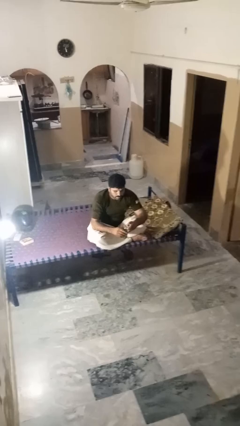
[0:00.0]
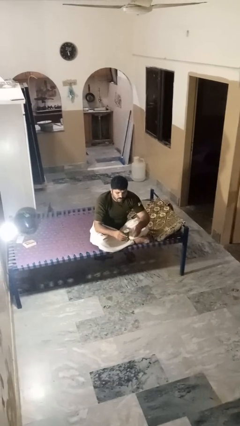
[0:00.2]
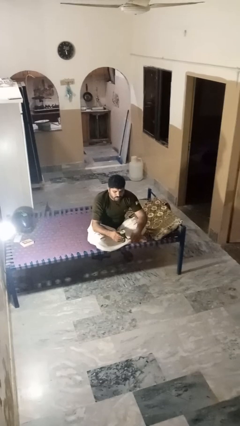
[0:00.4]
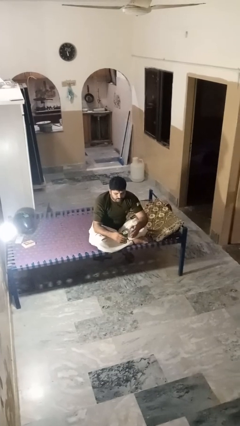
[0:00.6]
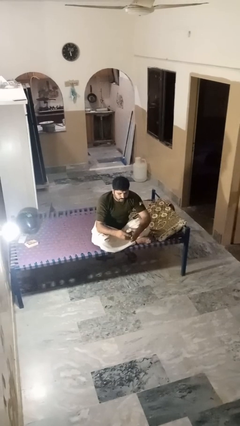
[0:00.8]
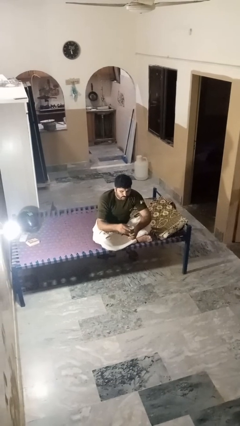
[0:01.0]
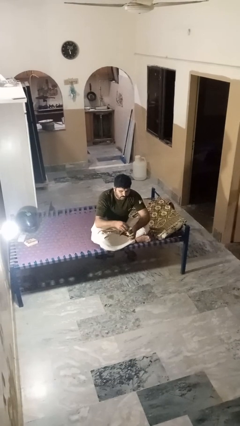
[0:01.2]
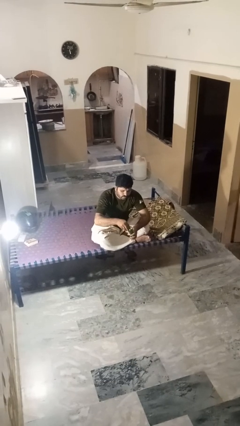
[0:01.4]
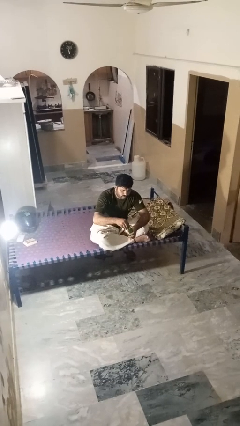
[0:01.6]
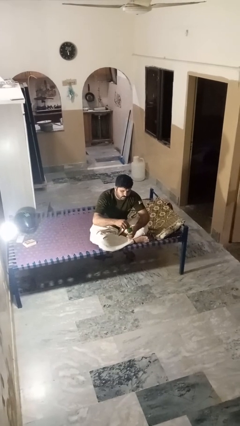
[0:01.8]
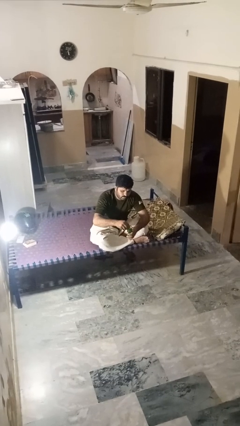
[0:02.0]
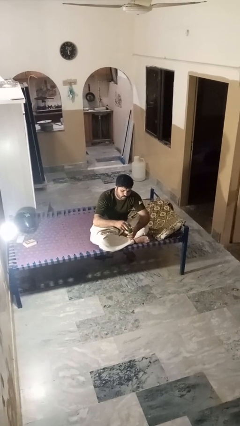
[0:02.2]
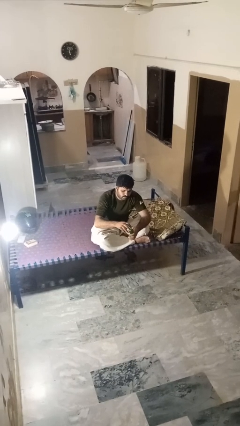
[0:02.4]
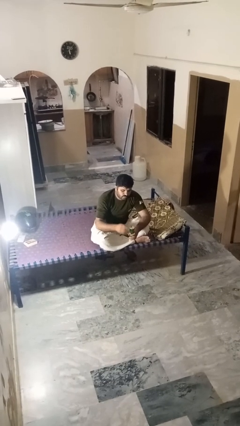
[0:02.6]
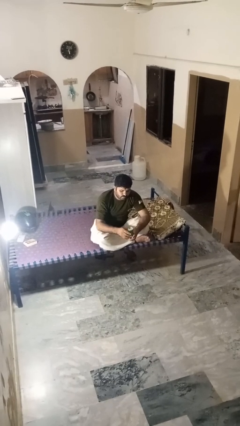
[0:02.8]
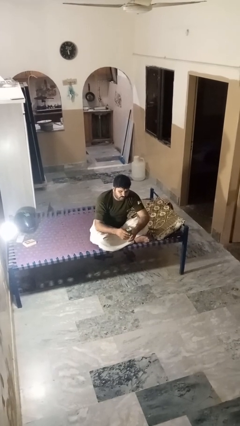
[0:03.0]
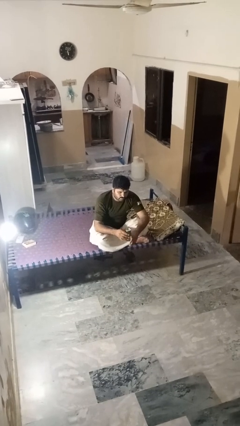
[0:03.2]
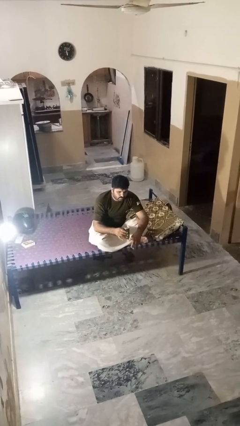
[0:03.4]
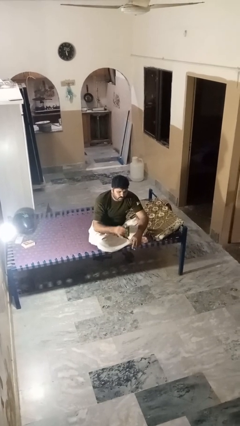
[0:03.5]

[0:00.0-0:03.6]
person opens beverage can

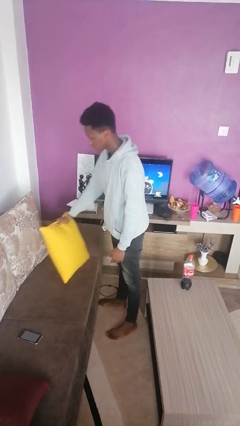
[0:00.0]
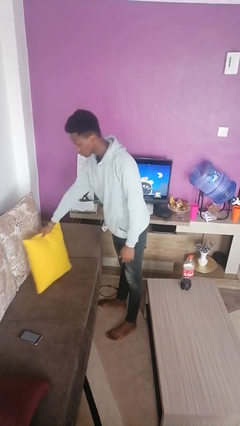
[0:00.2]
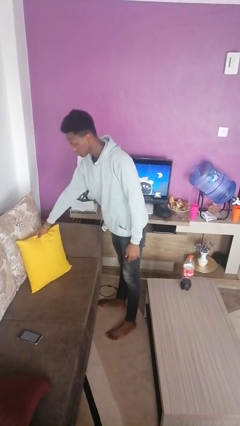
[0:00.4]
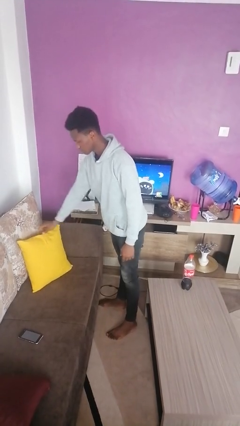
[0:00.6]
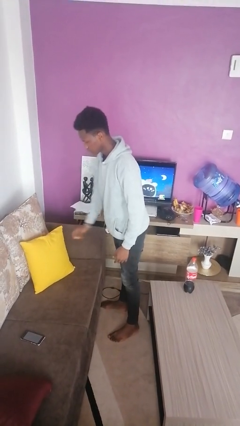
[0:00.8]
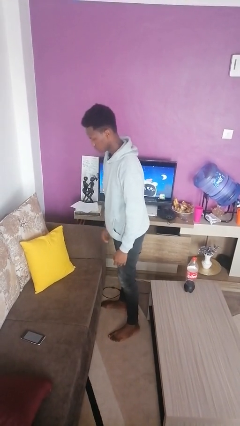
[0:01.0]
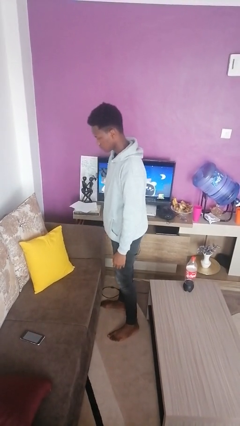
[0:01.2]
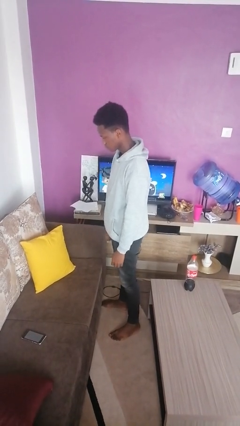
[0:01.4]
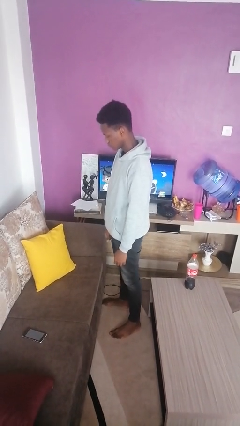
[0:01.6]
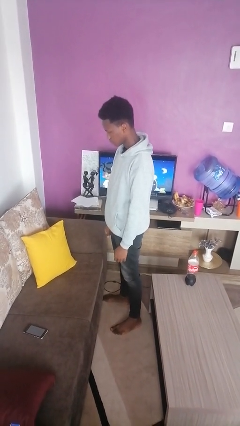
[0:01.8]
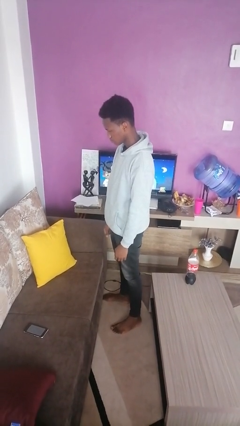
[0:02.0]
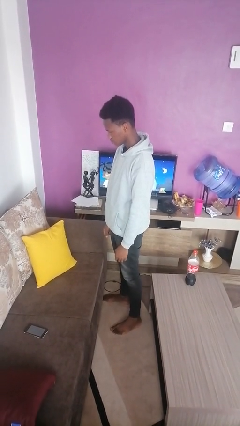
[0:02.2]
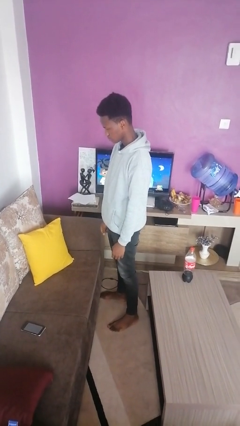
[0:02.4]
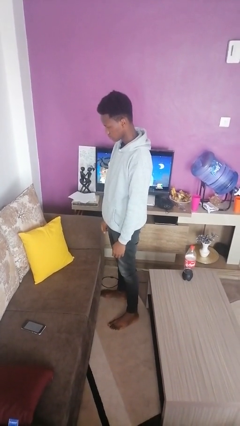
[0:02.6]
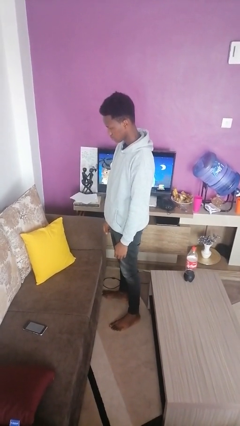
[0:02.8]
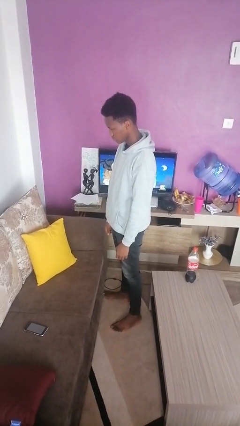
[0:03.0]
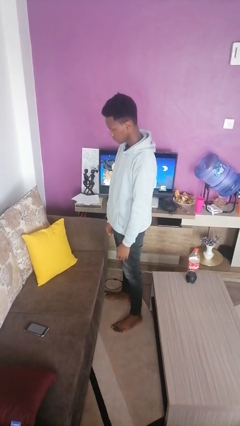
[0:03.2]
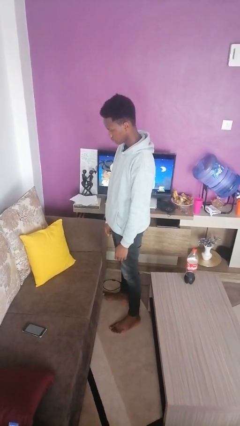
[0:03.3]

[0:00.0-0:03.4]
person puts down object on couch

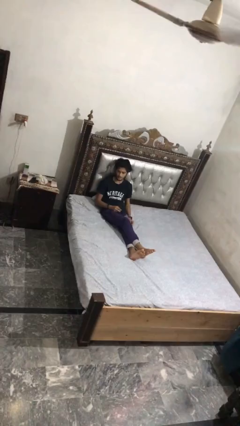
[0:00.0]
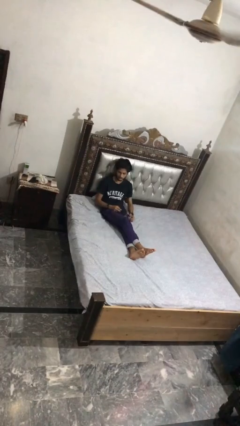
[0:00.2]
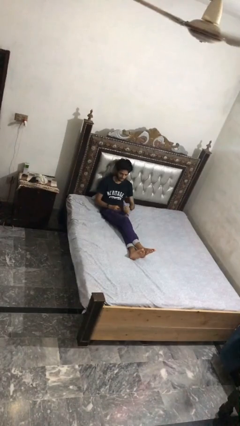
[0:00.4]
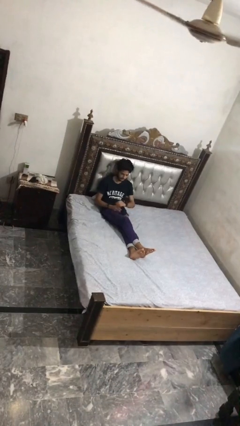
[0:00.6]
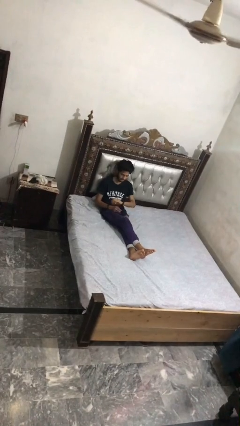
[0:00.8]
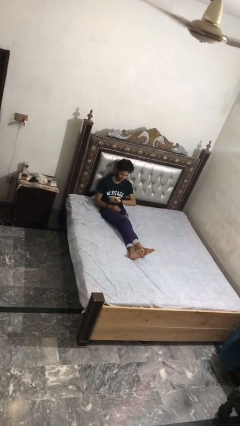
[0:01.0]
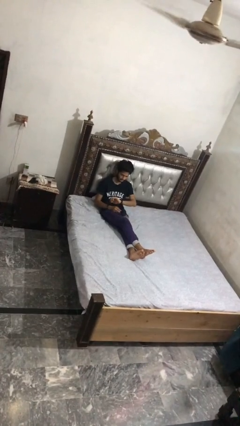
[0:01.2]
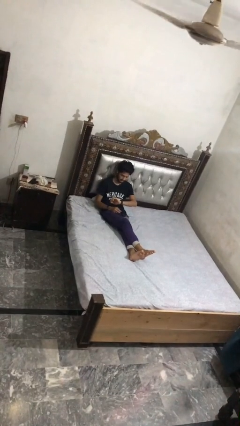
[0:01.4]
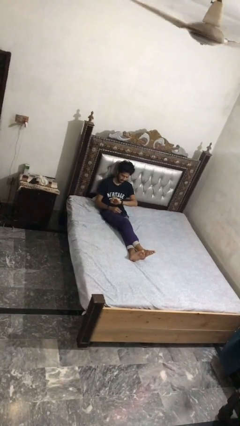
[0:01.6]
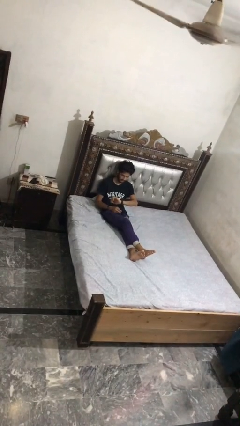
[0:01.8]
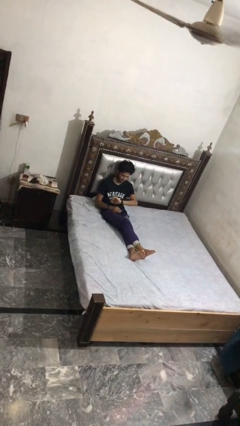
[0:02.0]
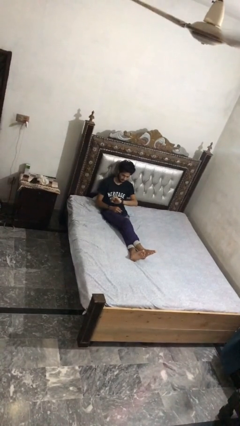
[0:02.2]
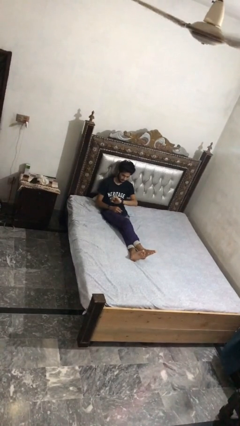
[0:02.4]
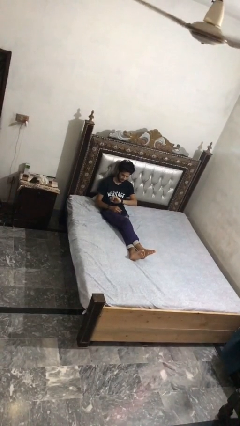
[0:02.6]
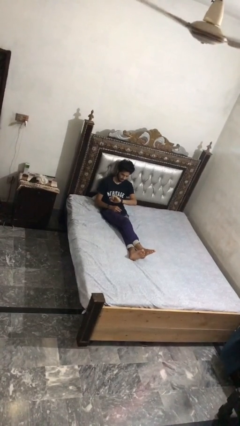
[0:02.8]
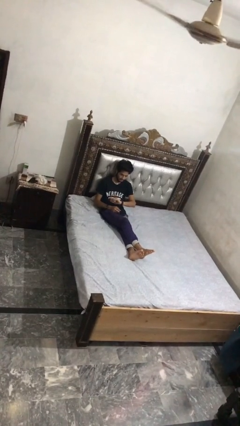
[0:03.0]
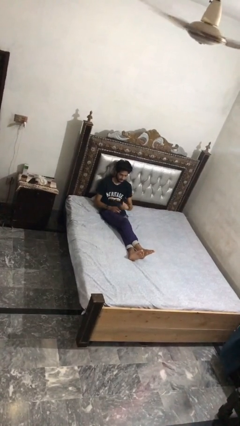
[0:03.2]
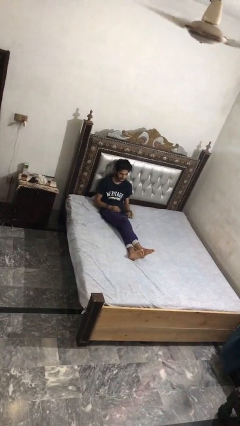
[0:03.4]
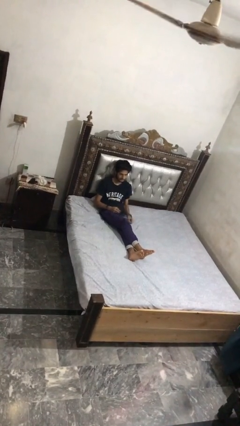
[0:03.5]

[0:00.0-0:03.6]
person looks at wristwatch

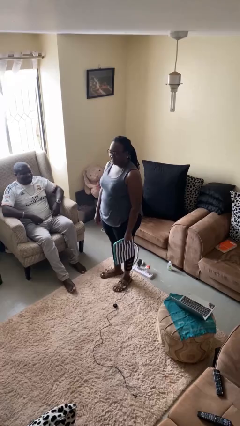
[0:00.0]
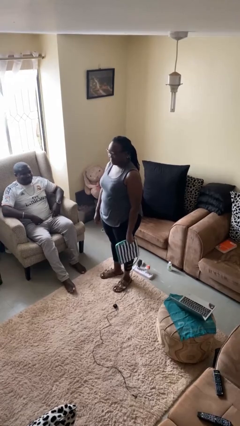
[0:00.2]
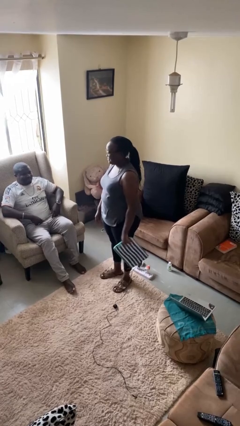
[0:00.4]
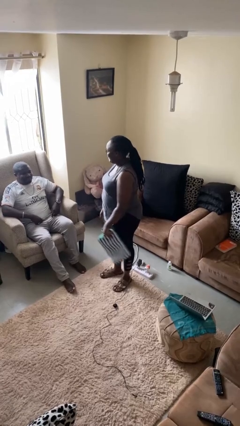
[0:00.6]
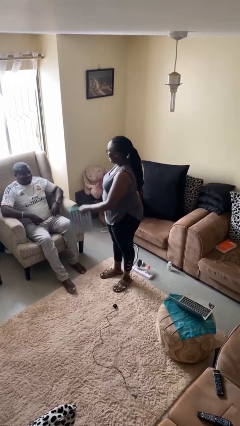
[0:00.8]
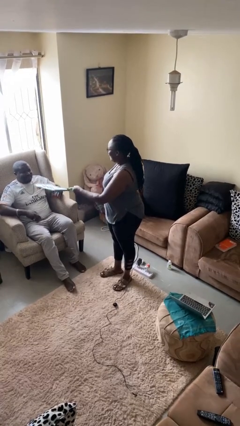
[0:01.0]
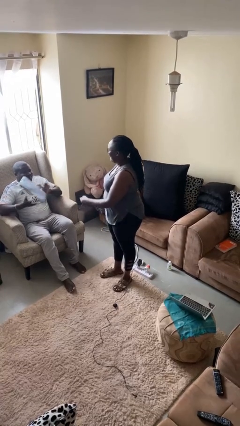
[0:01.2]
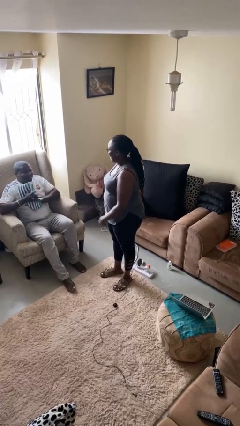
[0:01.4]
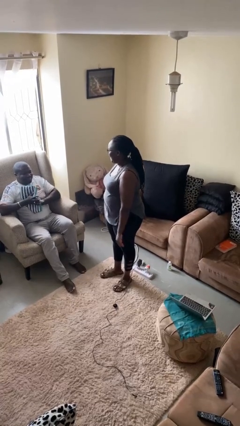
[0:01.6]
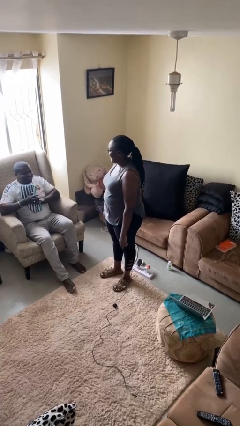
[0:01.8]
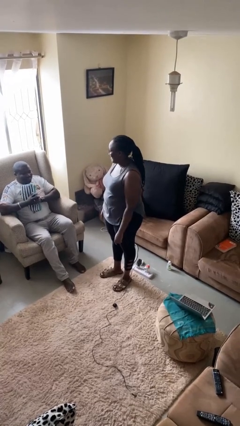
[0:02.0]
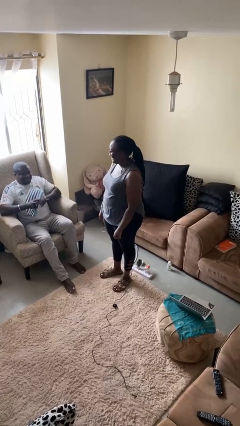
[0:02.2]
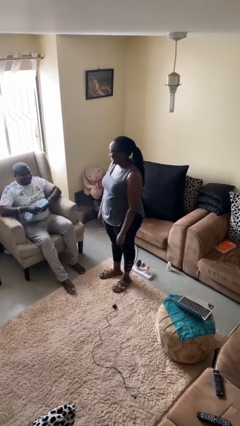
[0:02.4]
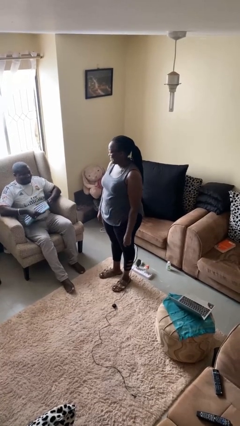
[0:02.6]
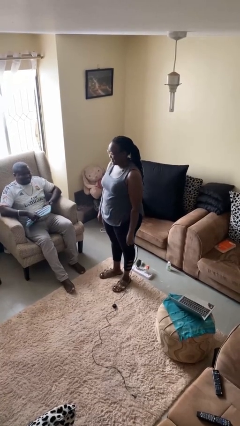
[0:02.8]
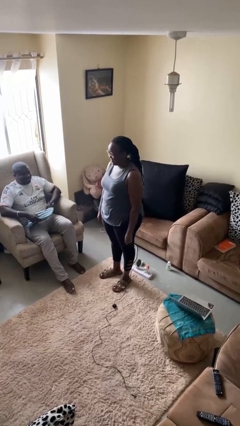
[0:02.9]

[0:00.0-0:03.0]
person throws object to person

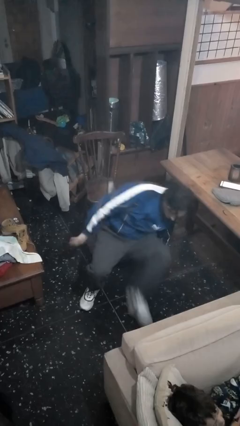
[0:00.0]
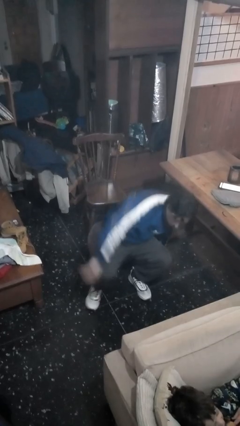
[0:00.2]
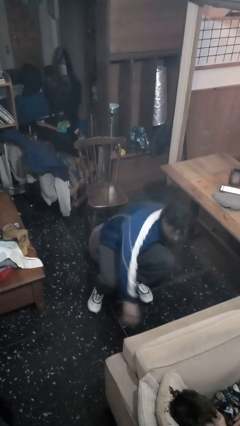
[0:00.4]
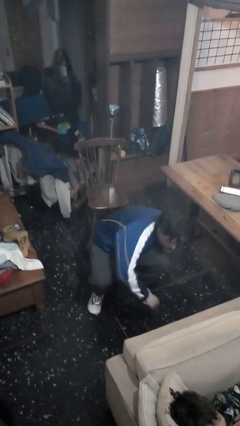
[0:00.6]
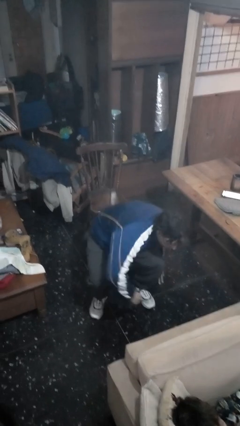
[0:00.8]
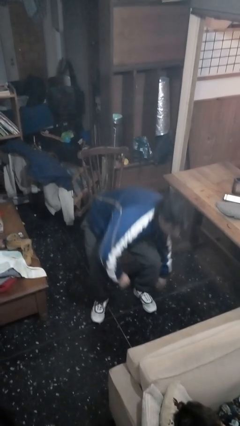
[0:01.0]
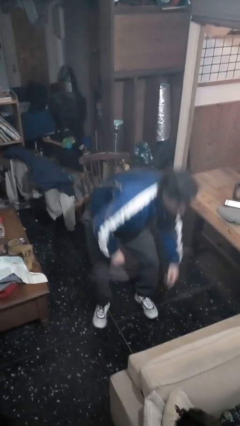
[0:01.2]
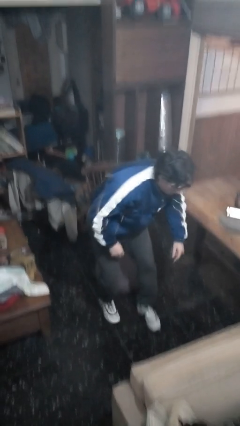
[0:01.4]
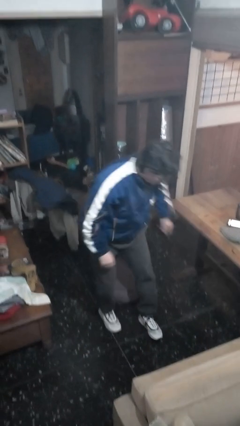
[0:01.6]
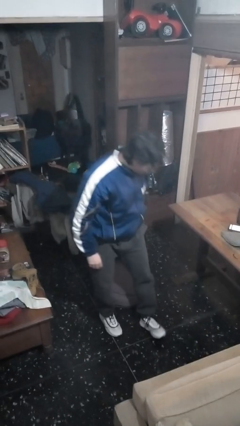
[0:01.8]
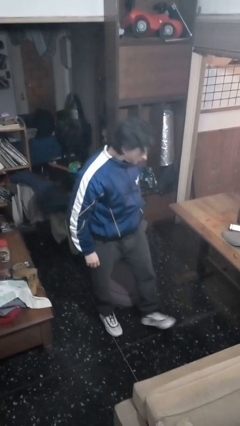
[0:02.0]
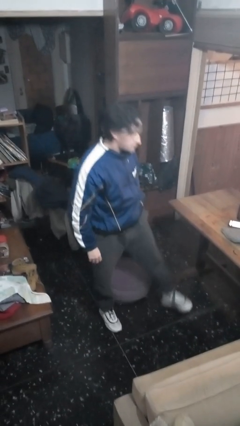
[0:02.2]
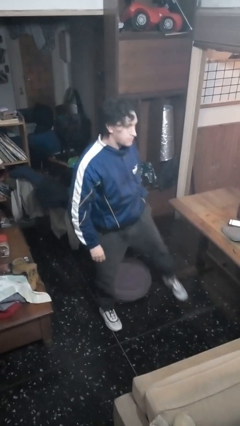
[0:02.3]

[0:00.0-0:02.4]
person stands up from floor

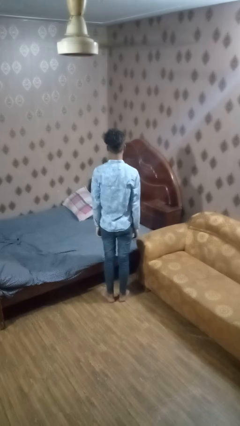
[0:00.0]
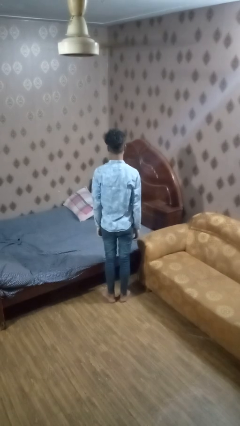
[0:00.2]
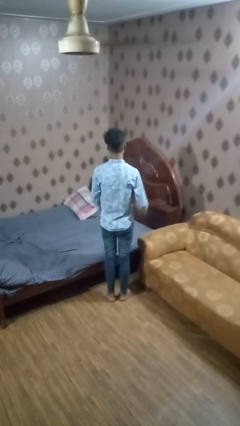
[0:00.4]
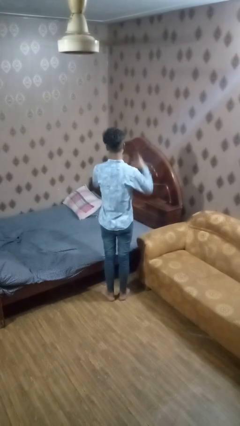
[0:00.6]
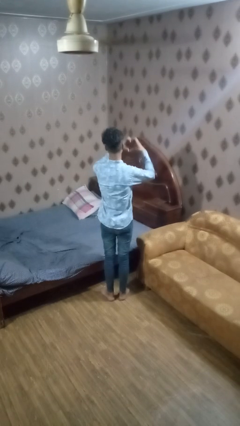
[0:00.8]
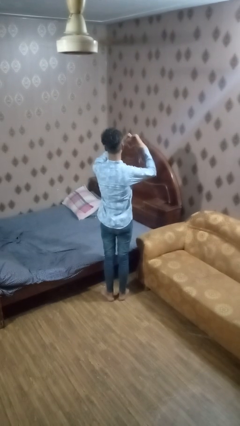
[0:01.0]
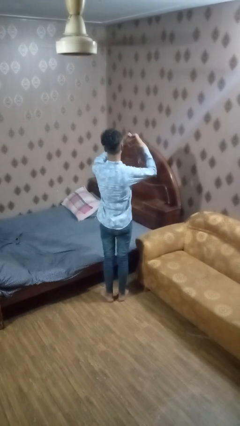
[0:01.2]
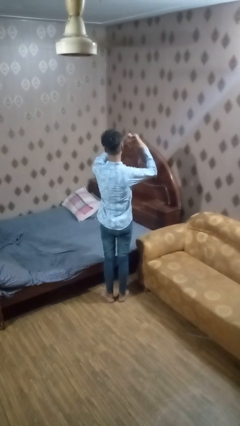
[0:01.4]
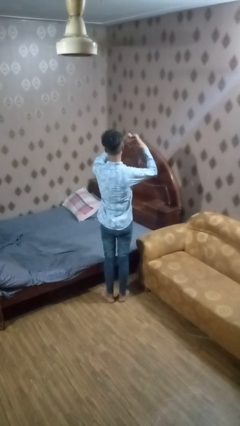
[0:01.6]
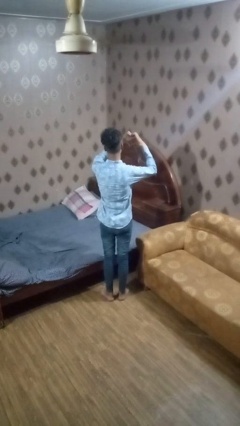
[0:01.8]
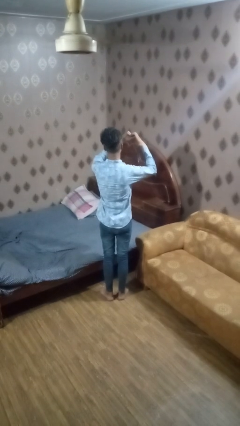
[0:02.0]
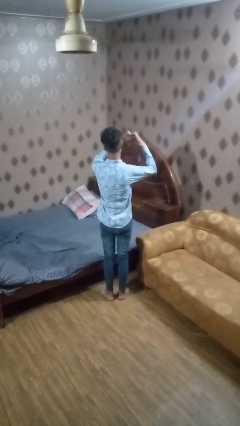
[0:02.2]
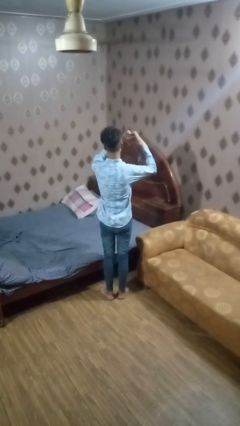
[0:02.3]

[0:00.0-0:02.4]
person gestures heart
